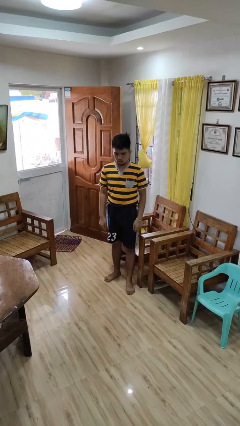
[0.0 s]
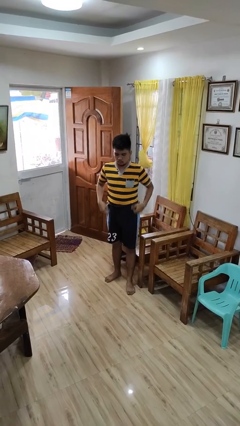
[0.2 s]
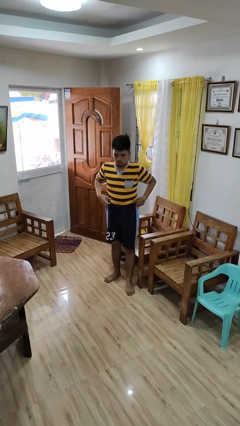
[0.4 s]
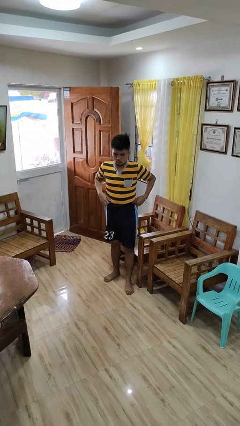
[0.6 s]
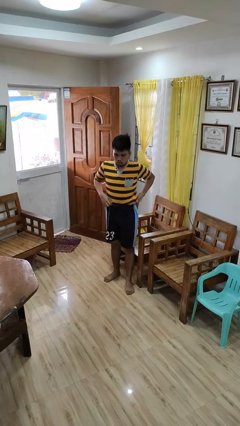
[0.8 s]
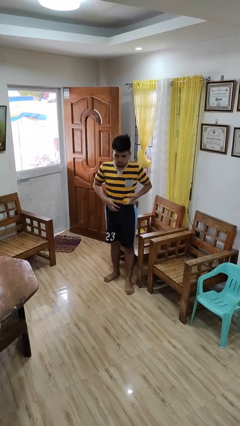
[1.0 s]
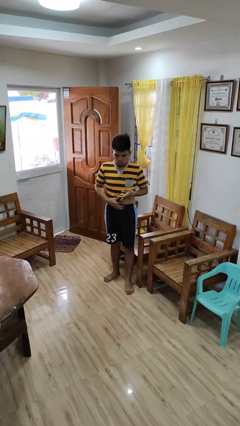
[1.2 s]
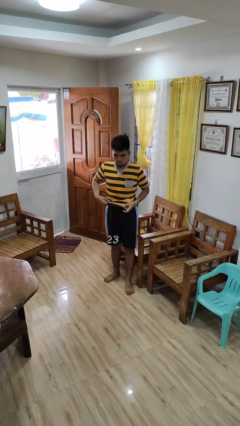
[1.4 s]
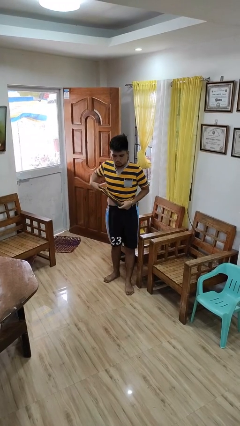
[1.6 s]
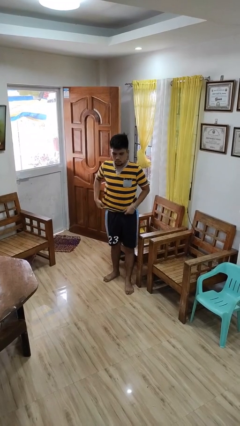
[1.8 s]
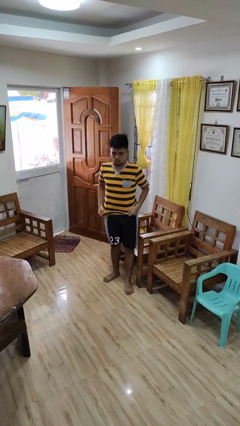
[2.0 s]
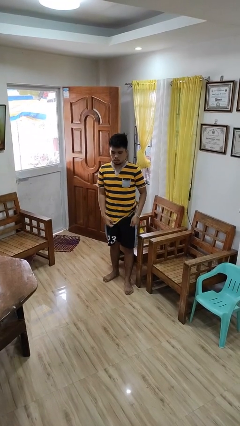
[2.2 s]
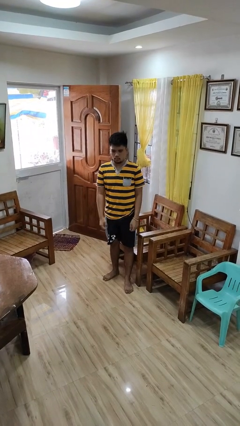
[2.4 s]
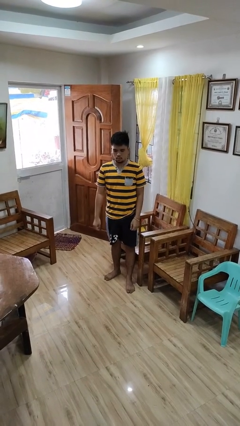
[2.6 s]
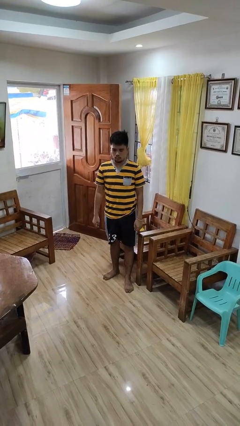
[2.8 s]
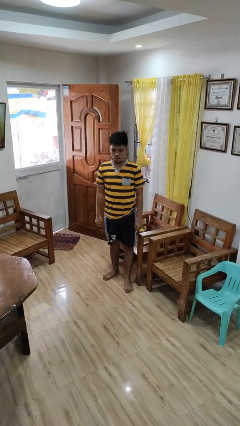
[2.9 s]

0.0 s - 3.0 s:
person untucks shirt

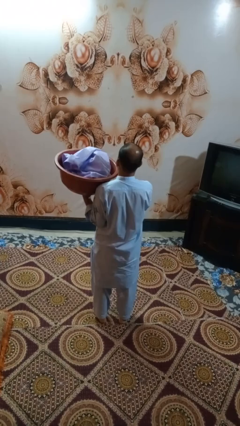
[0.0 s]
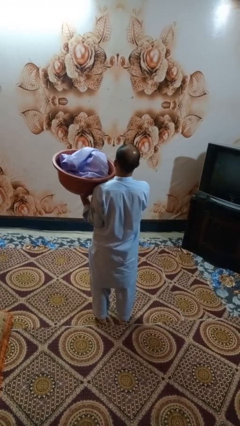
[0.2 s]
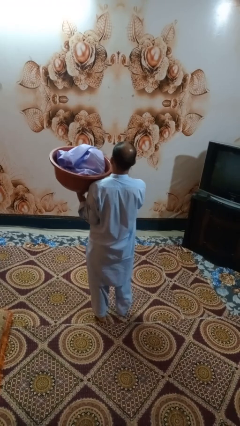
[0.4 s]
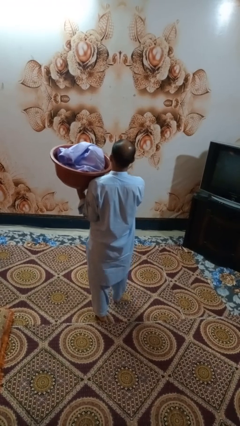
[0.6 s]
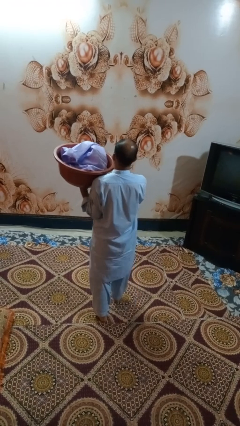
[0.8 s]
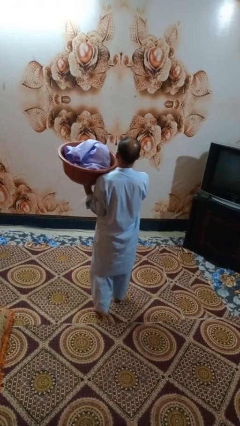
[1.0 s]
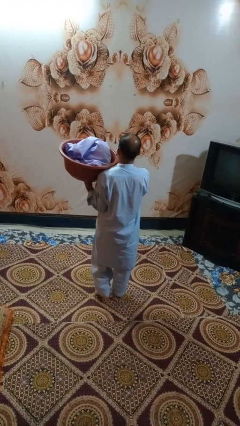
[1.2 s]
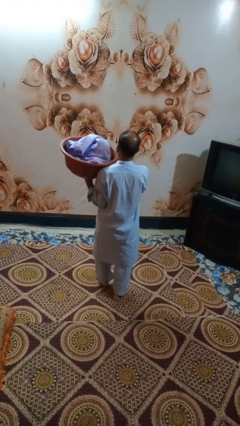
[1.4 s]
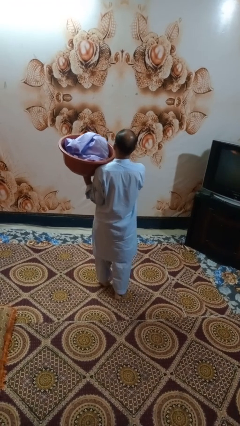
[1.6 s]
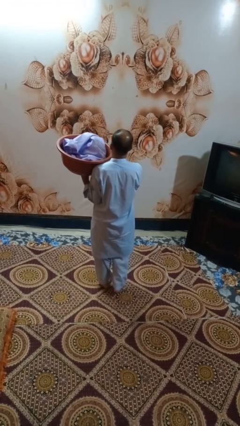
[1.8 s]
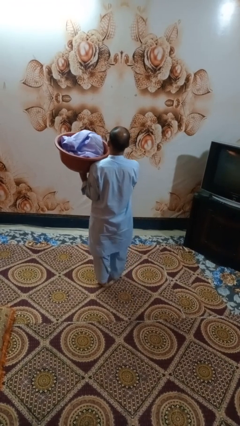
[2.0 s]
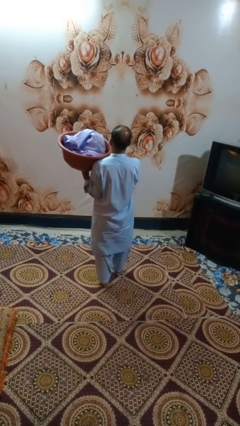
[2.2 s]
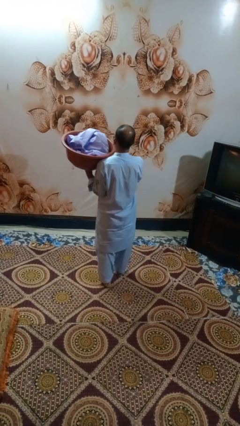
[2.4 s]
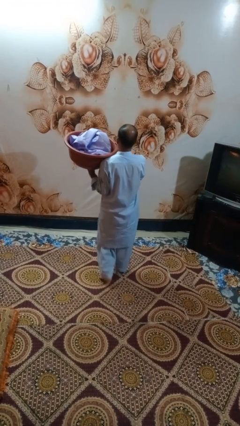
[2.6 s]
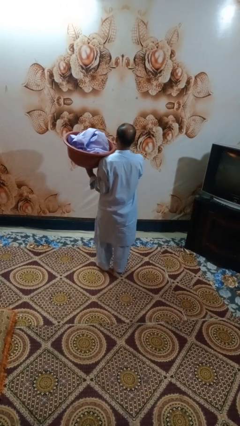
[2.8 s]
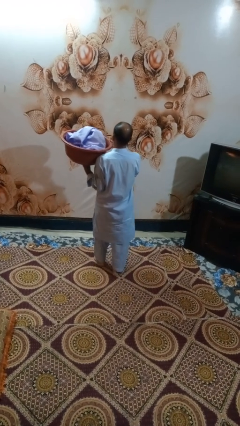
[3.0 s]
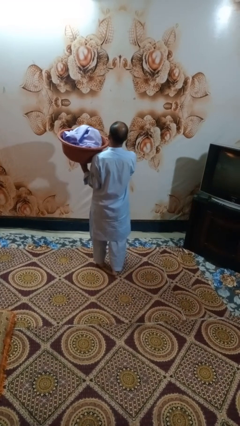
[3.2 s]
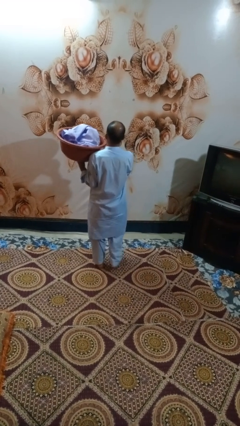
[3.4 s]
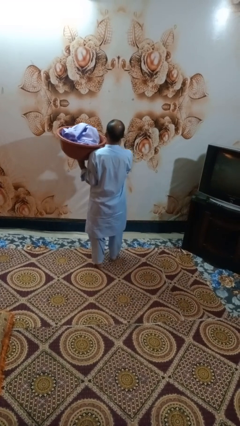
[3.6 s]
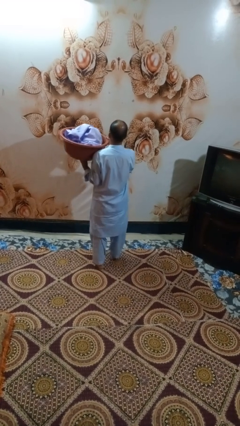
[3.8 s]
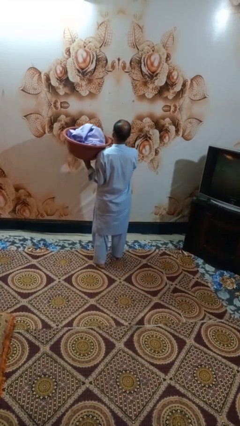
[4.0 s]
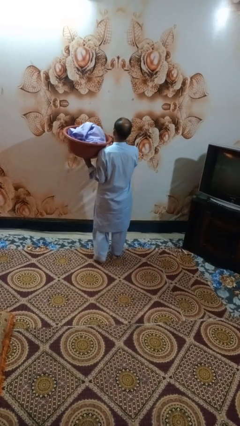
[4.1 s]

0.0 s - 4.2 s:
person carries laundry basket

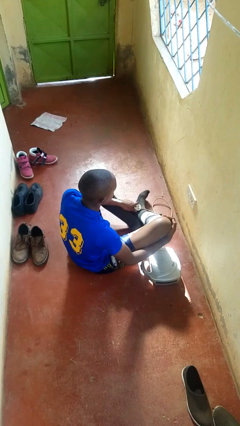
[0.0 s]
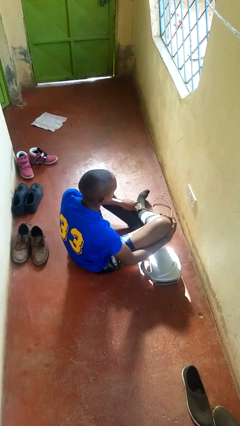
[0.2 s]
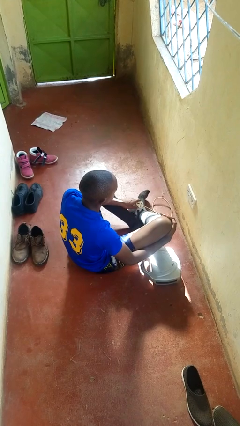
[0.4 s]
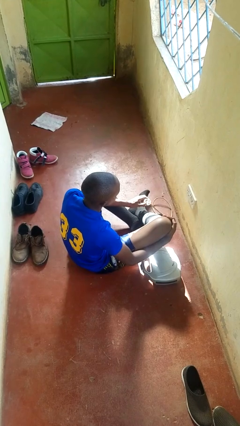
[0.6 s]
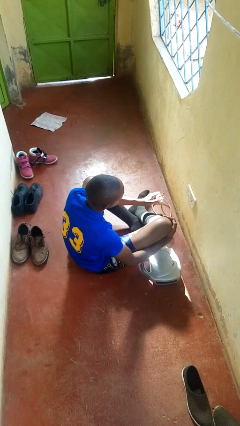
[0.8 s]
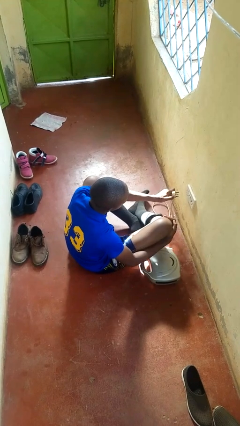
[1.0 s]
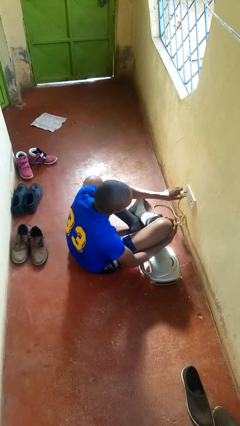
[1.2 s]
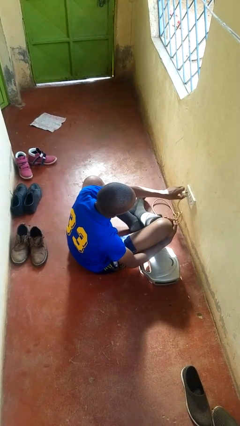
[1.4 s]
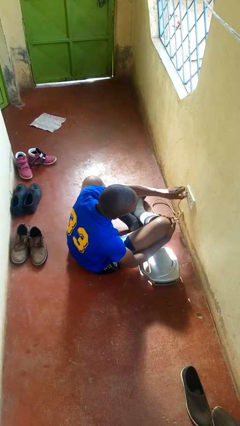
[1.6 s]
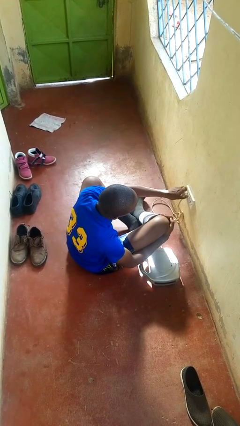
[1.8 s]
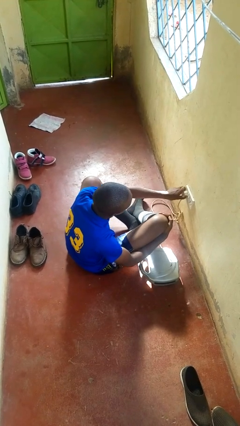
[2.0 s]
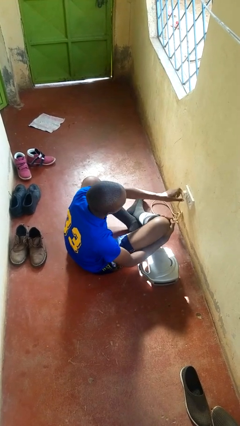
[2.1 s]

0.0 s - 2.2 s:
person plugs into electrical socket

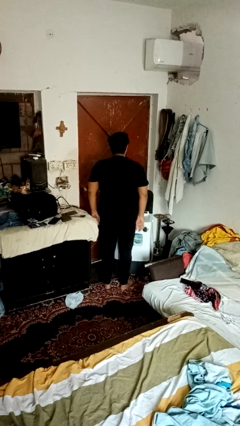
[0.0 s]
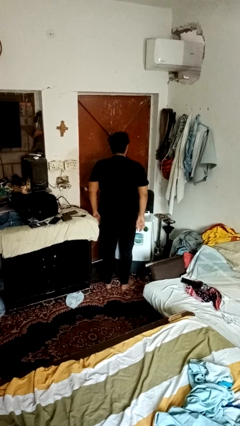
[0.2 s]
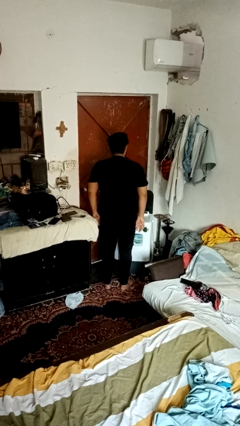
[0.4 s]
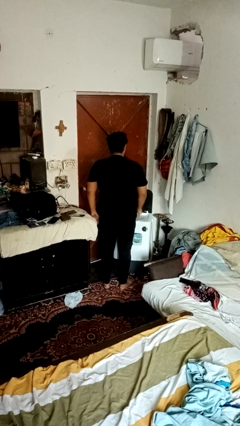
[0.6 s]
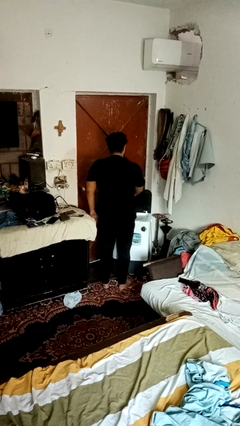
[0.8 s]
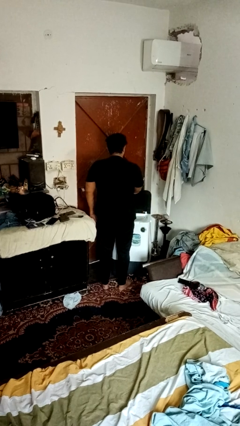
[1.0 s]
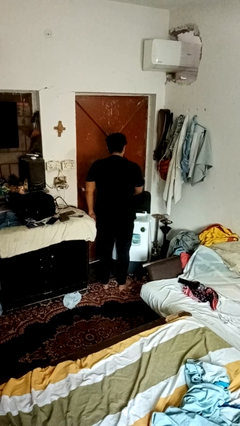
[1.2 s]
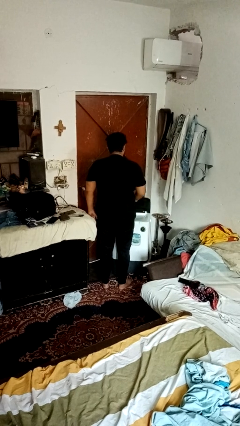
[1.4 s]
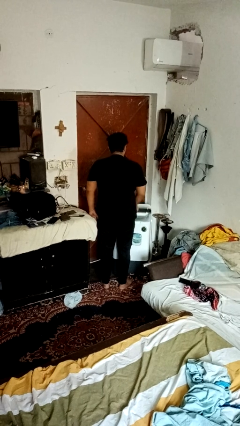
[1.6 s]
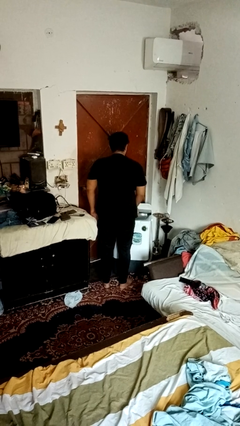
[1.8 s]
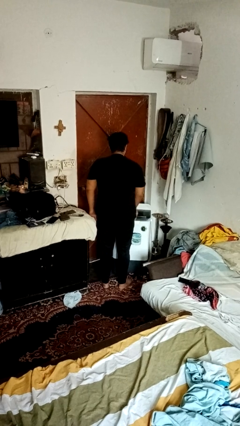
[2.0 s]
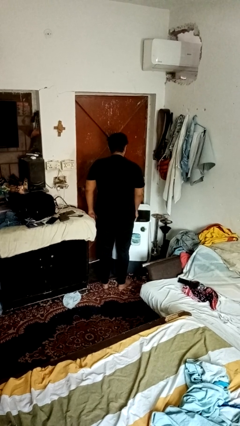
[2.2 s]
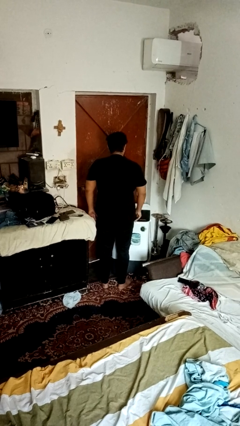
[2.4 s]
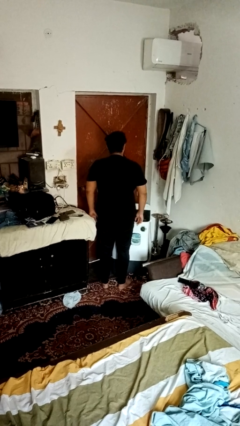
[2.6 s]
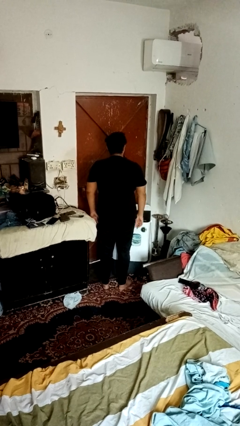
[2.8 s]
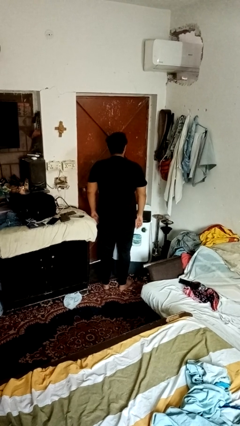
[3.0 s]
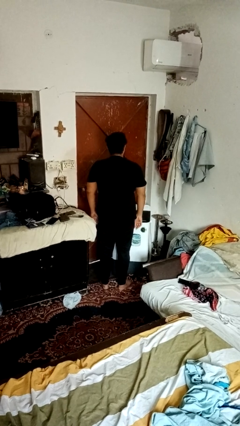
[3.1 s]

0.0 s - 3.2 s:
person closes clothes washer

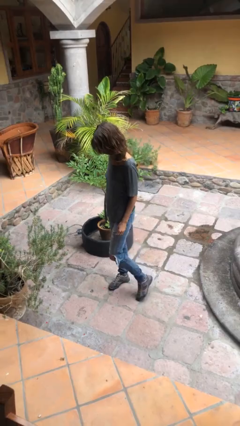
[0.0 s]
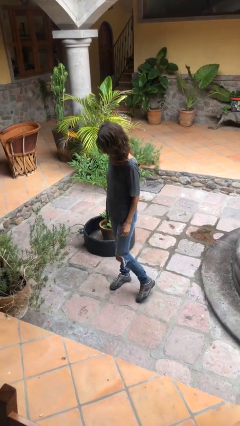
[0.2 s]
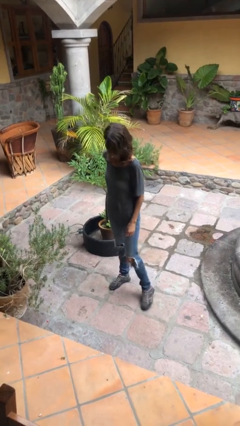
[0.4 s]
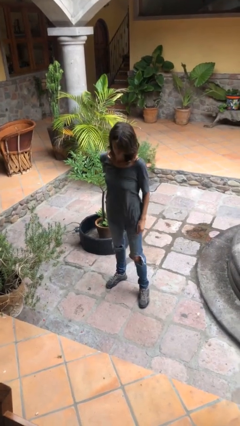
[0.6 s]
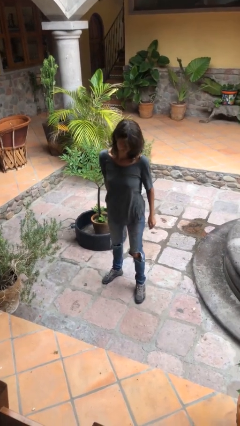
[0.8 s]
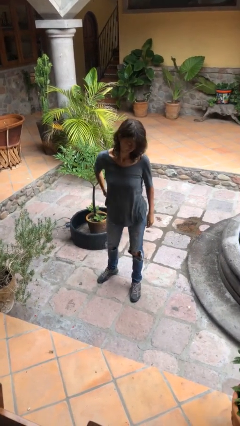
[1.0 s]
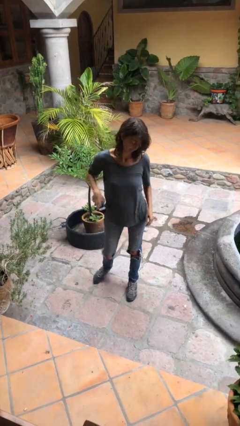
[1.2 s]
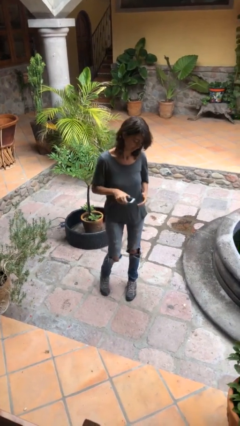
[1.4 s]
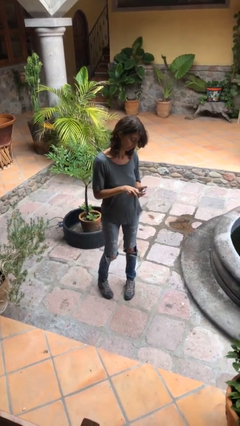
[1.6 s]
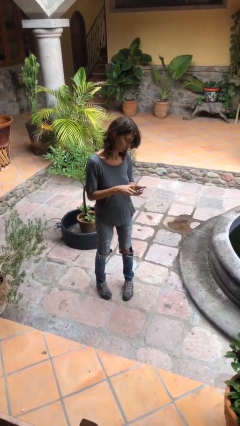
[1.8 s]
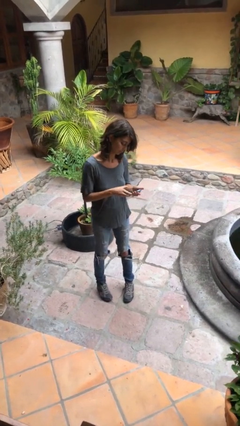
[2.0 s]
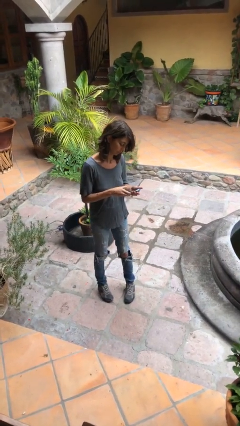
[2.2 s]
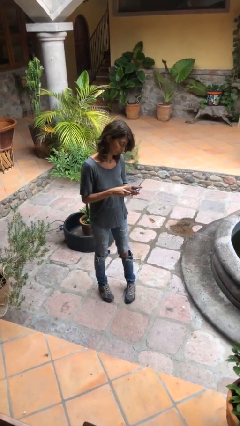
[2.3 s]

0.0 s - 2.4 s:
person takes phone from pocket

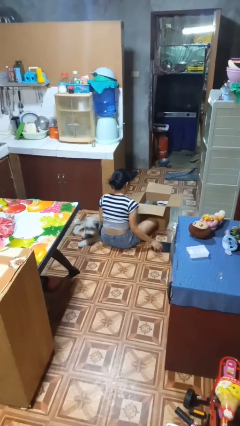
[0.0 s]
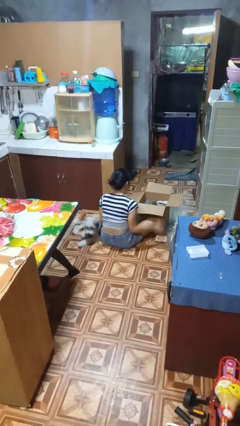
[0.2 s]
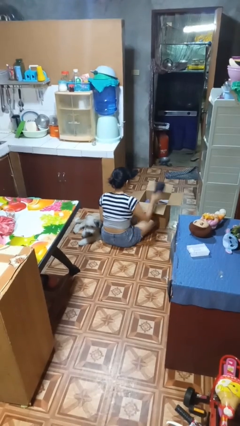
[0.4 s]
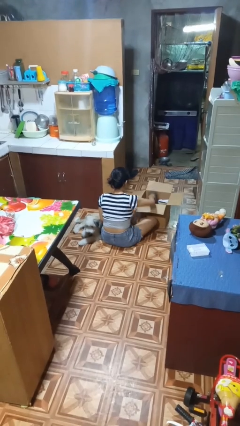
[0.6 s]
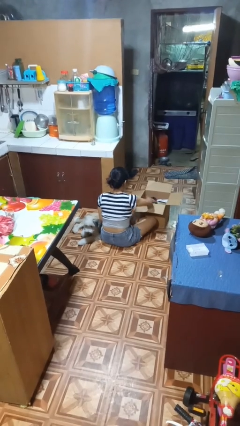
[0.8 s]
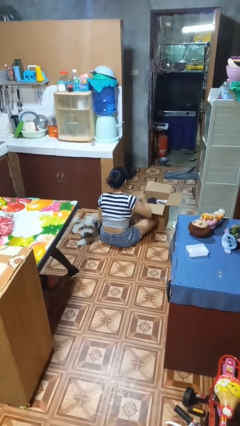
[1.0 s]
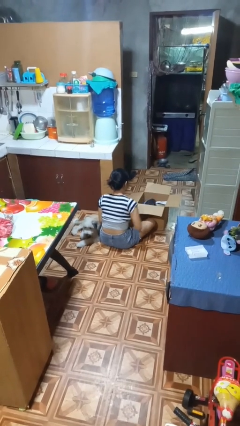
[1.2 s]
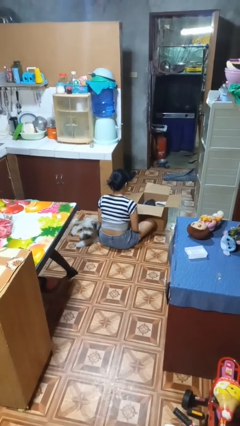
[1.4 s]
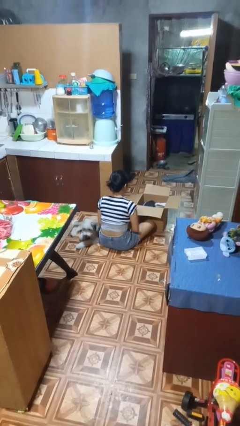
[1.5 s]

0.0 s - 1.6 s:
person puts object into box

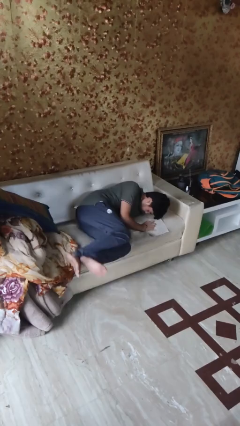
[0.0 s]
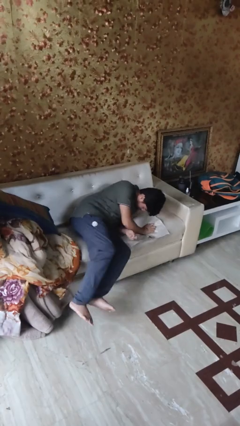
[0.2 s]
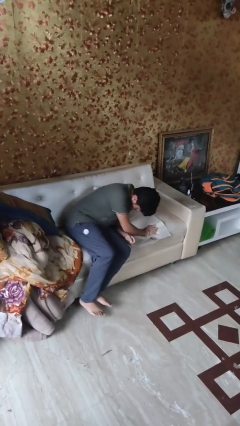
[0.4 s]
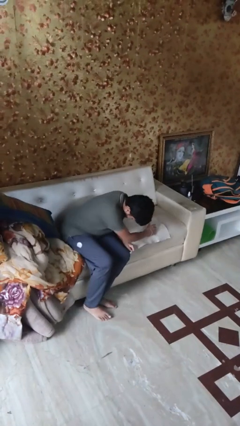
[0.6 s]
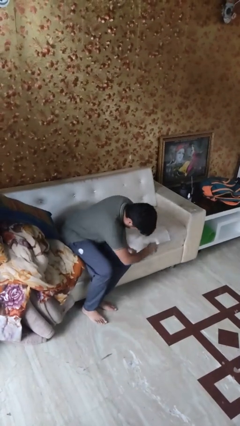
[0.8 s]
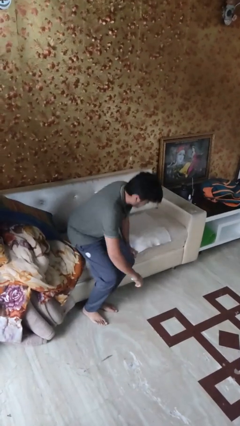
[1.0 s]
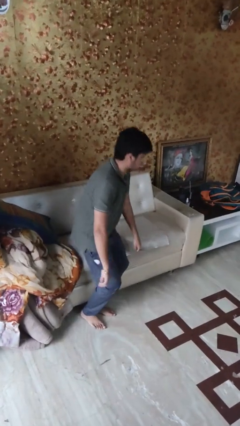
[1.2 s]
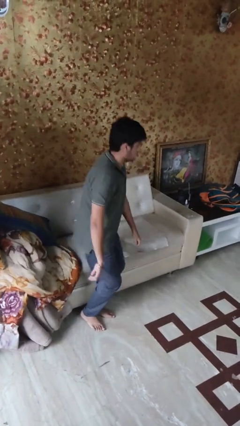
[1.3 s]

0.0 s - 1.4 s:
person stands up
